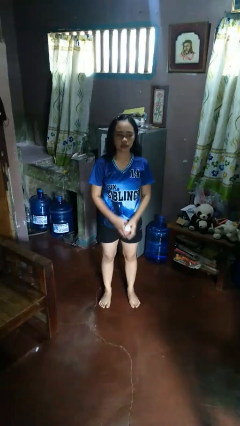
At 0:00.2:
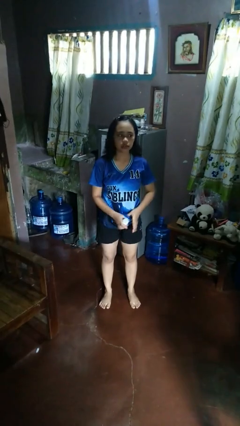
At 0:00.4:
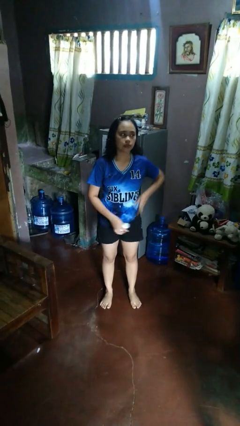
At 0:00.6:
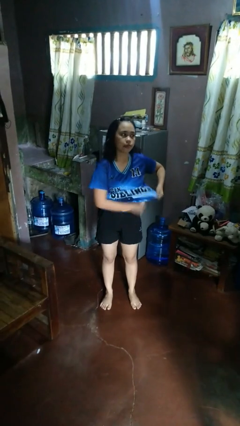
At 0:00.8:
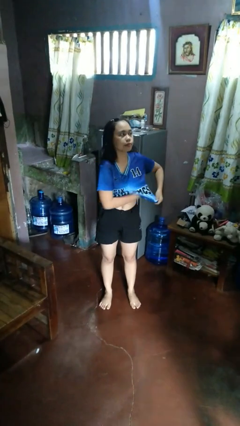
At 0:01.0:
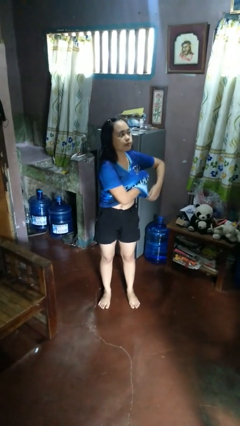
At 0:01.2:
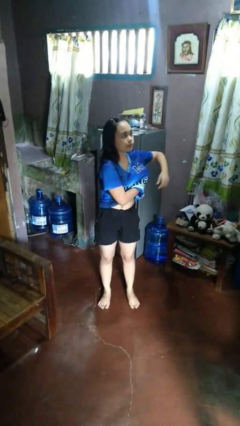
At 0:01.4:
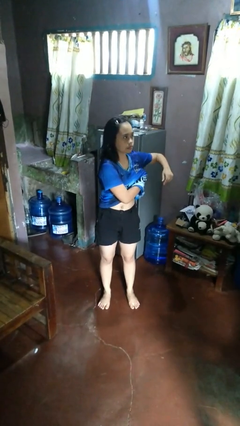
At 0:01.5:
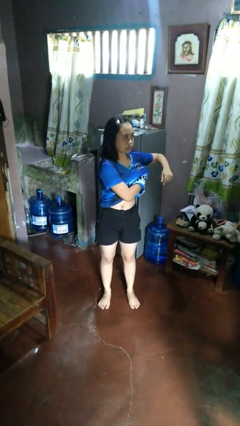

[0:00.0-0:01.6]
person applies deodorant

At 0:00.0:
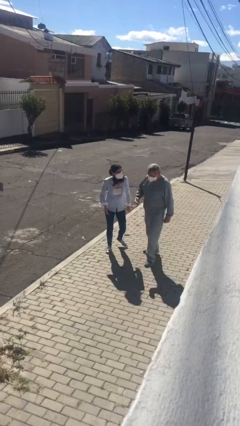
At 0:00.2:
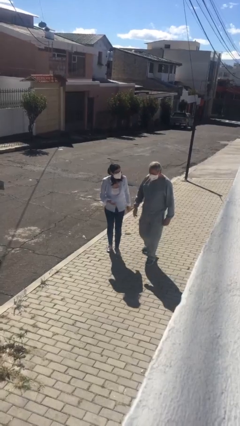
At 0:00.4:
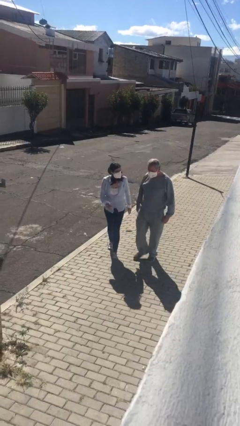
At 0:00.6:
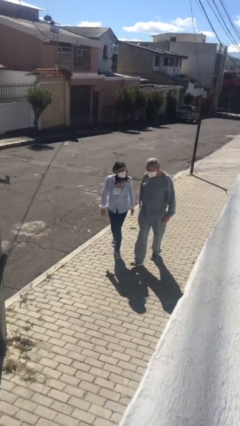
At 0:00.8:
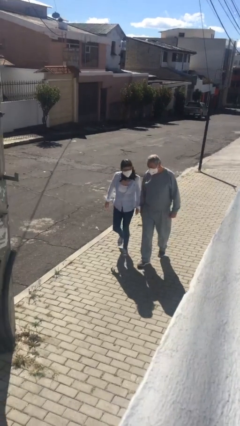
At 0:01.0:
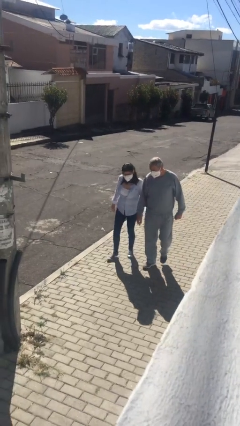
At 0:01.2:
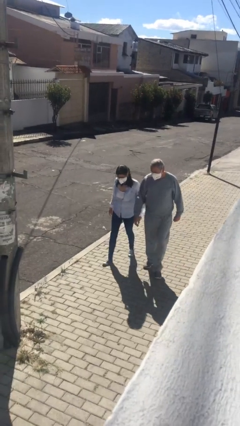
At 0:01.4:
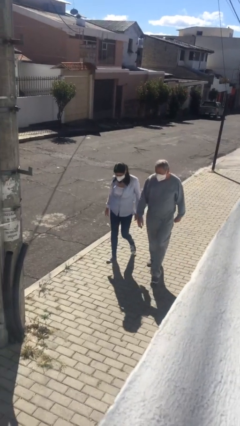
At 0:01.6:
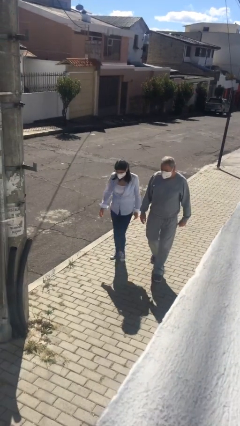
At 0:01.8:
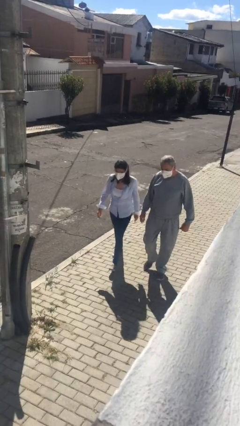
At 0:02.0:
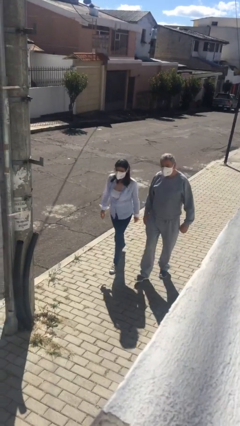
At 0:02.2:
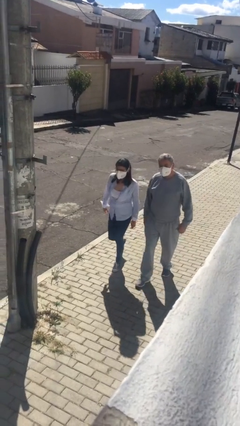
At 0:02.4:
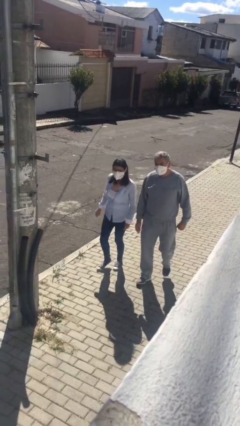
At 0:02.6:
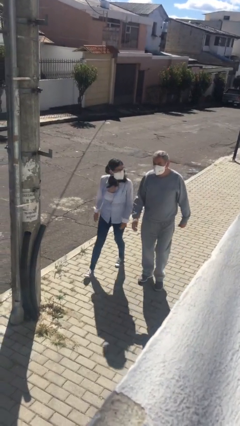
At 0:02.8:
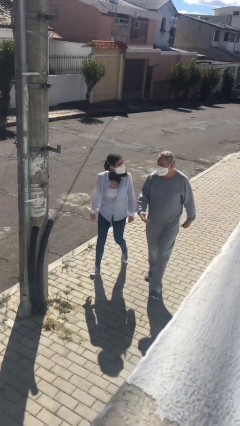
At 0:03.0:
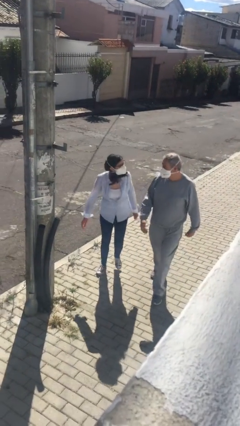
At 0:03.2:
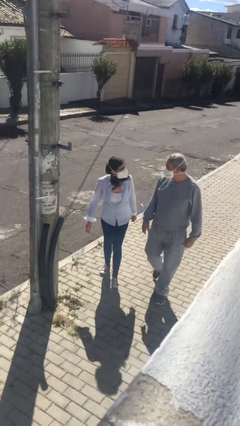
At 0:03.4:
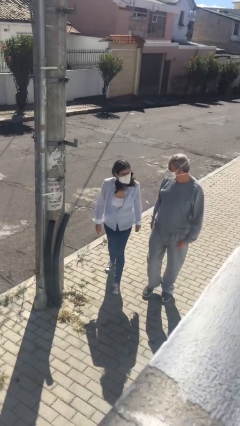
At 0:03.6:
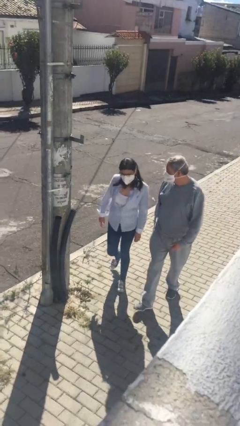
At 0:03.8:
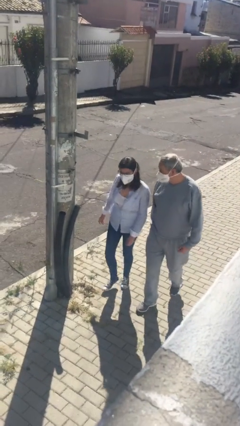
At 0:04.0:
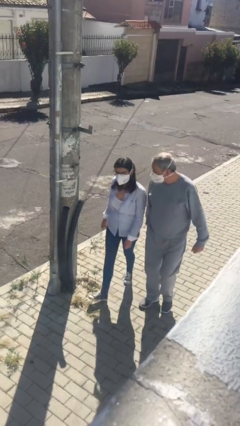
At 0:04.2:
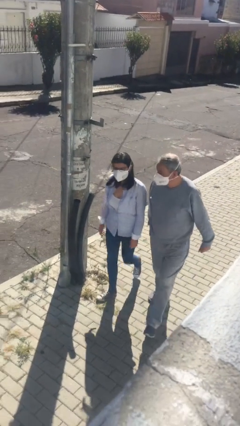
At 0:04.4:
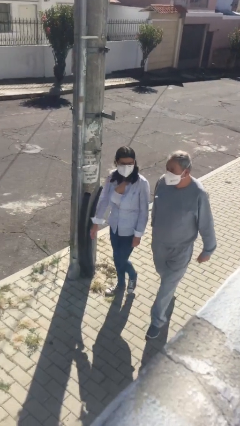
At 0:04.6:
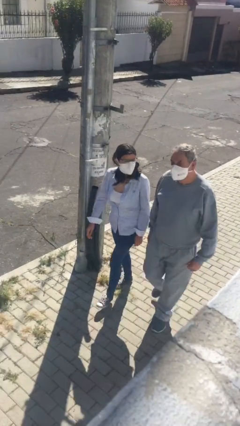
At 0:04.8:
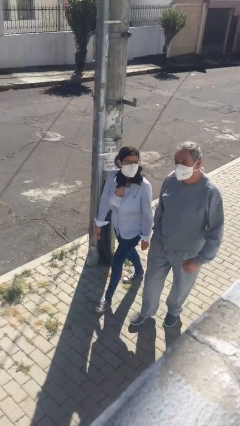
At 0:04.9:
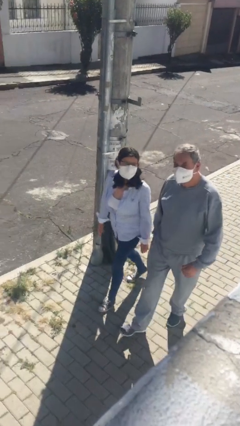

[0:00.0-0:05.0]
person talks to person

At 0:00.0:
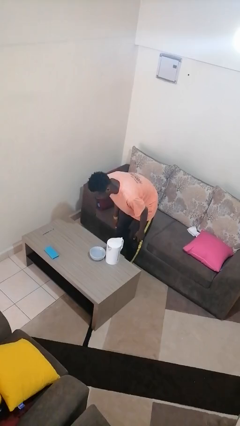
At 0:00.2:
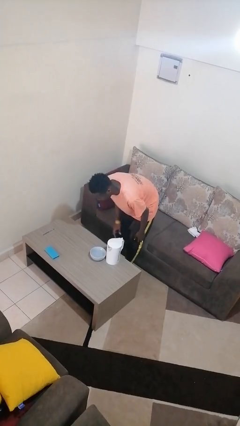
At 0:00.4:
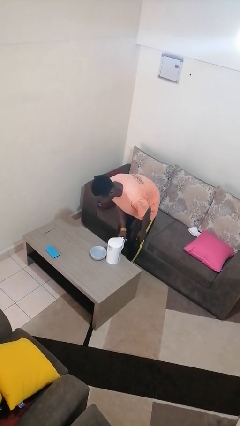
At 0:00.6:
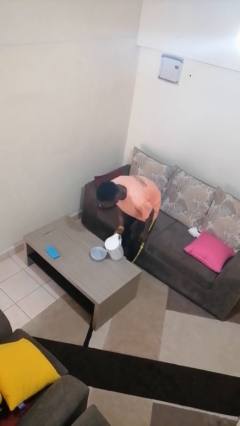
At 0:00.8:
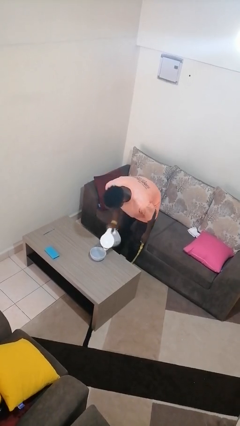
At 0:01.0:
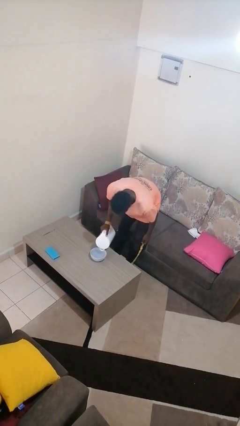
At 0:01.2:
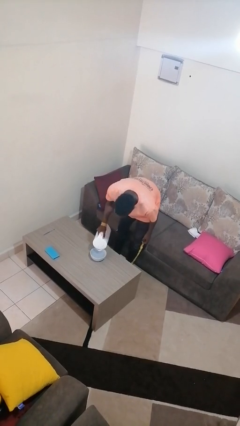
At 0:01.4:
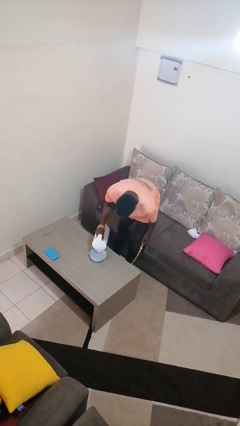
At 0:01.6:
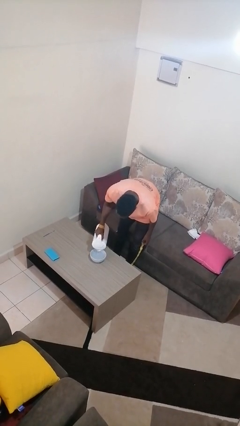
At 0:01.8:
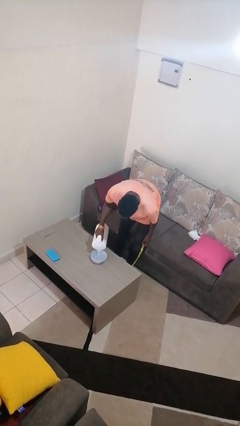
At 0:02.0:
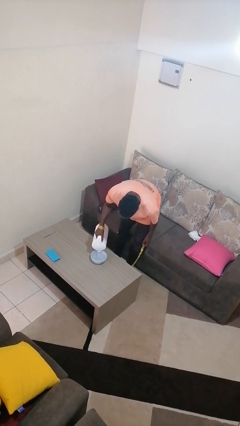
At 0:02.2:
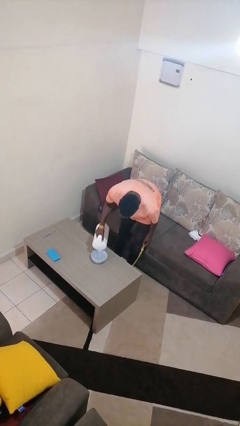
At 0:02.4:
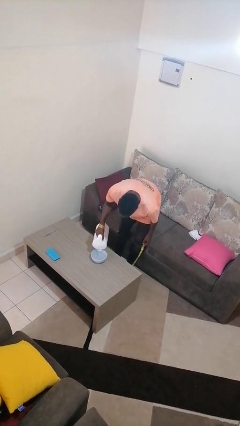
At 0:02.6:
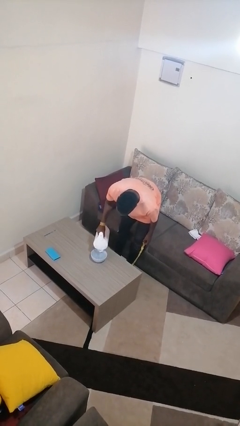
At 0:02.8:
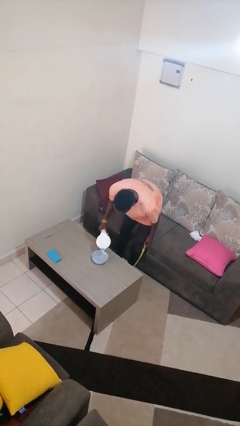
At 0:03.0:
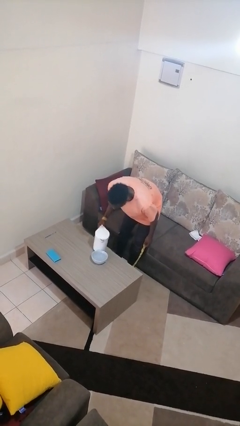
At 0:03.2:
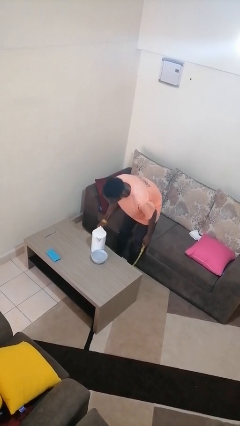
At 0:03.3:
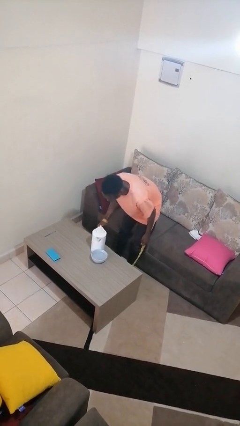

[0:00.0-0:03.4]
person pours into bowl

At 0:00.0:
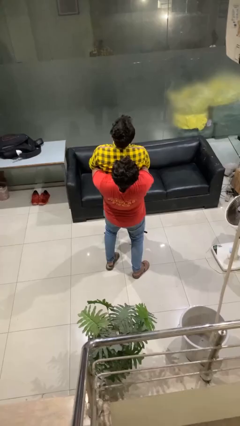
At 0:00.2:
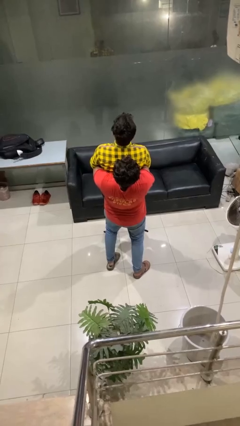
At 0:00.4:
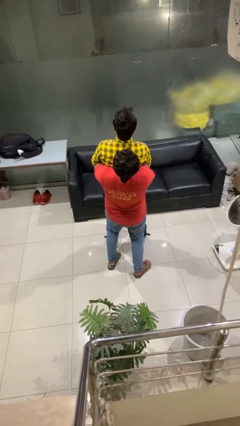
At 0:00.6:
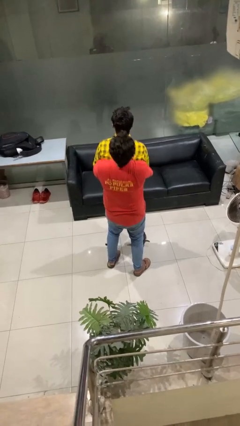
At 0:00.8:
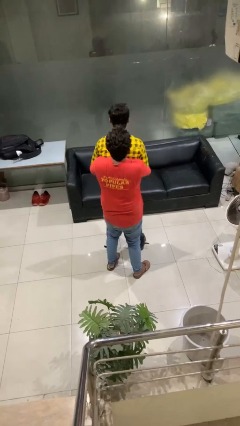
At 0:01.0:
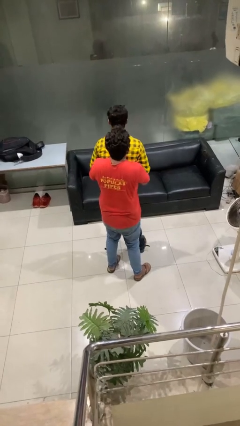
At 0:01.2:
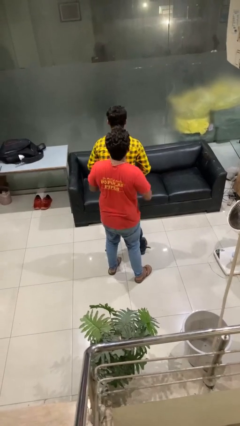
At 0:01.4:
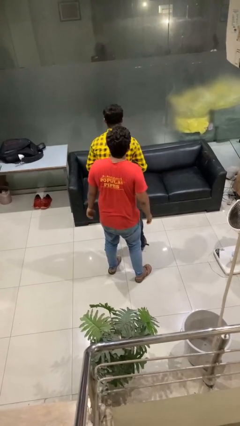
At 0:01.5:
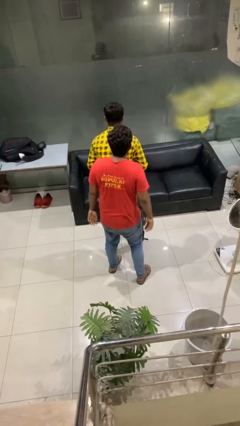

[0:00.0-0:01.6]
person puts down person

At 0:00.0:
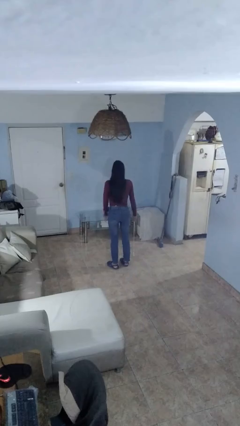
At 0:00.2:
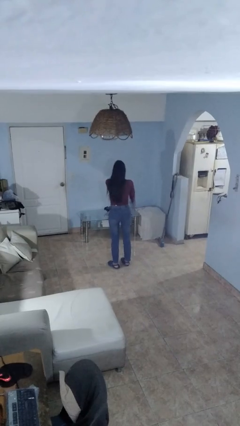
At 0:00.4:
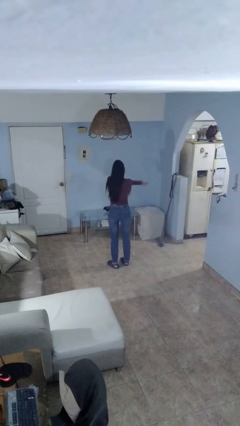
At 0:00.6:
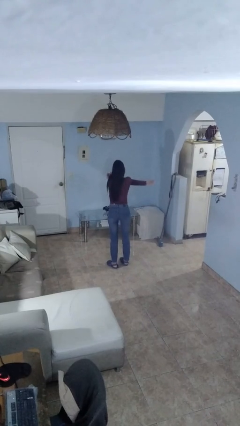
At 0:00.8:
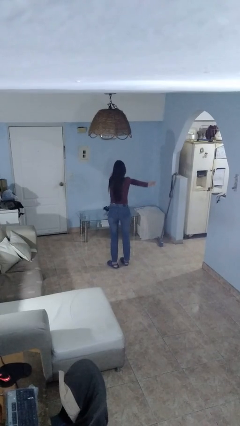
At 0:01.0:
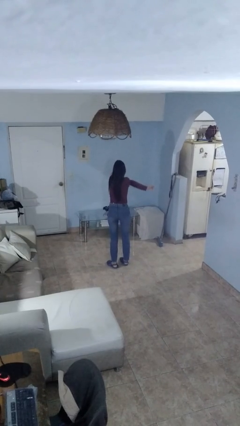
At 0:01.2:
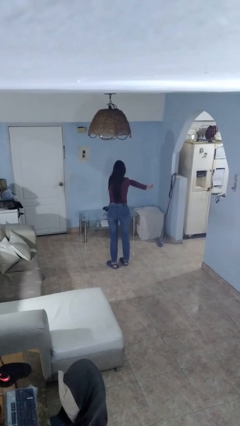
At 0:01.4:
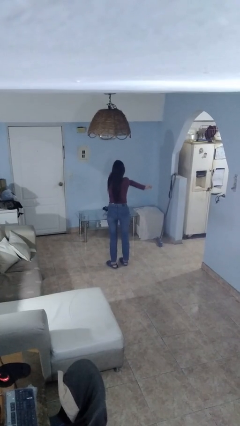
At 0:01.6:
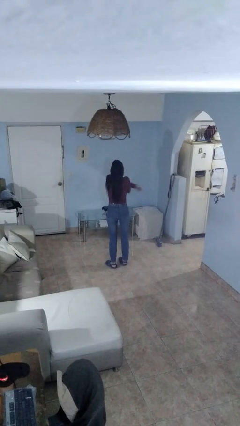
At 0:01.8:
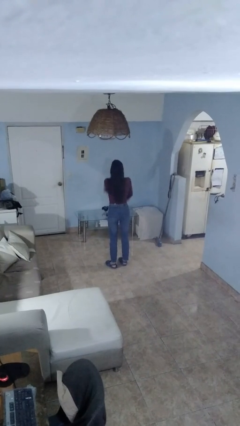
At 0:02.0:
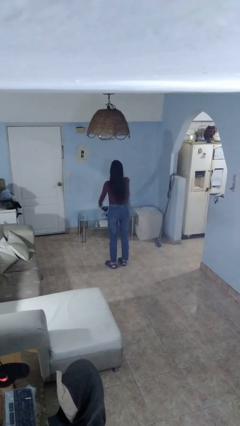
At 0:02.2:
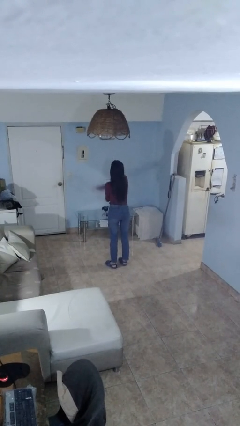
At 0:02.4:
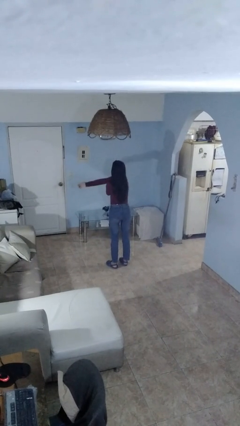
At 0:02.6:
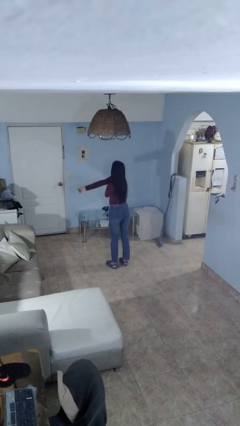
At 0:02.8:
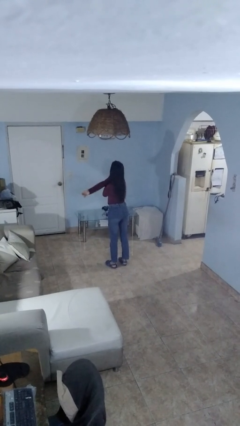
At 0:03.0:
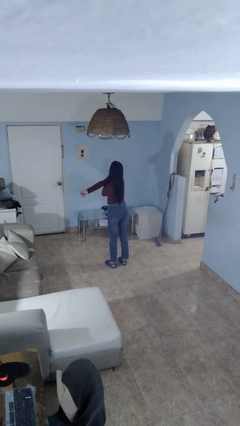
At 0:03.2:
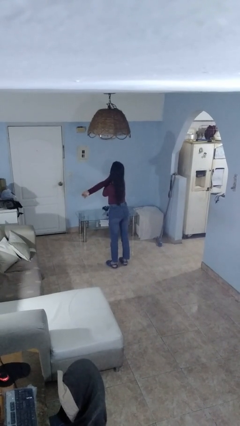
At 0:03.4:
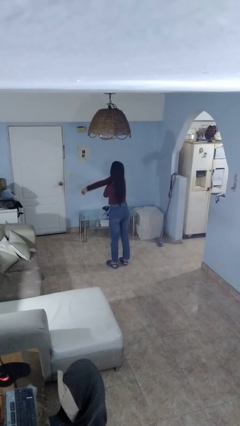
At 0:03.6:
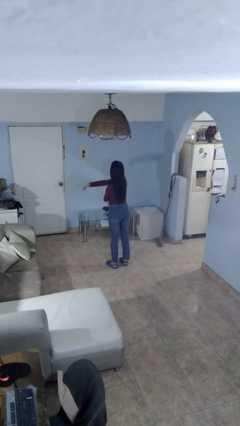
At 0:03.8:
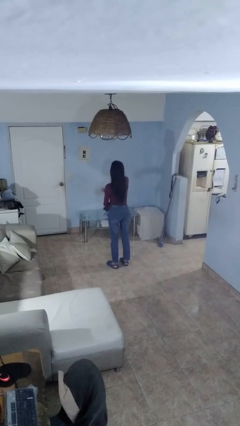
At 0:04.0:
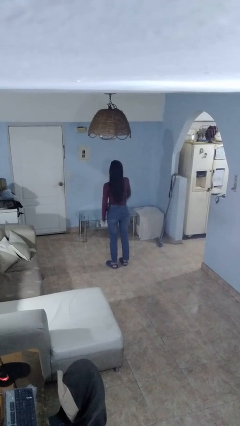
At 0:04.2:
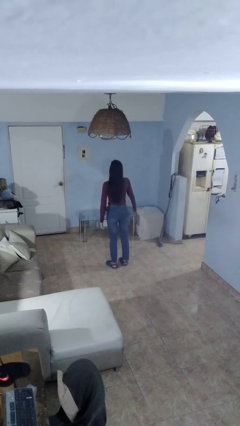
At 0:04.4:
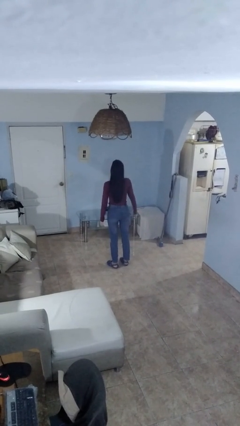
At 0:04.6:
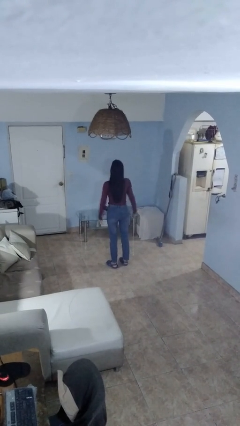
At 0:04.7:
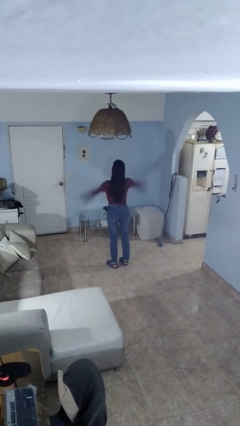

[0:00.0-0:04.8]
person stretches arms to side

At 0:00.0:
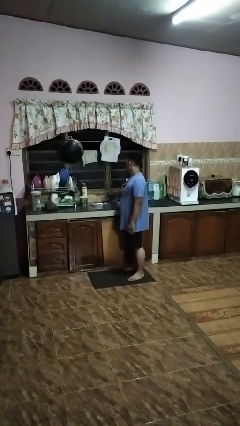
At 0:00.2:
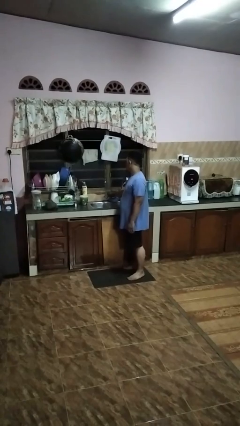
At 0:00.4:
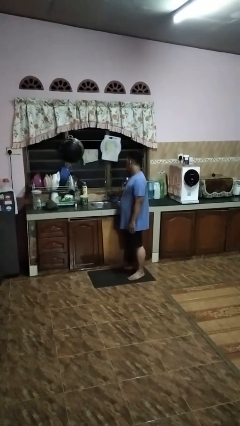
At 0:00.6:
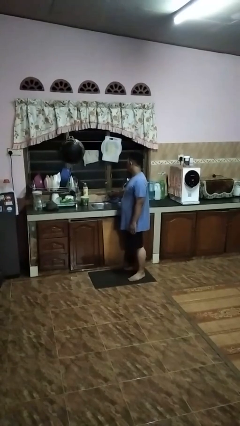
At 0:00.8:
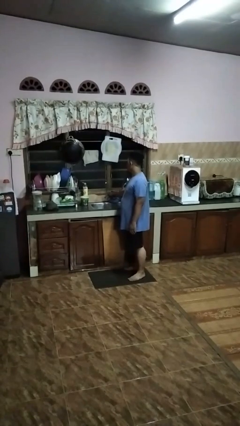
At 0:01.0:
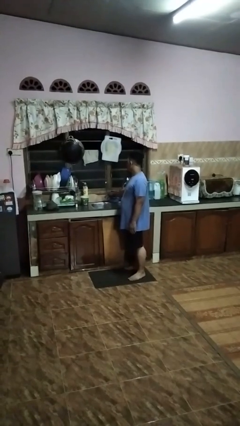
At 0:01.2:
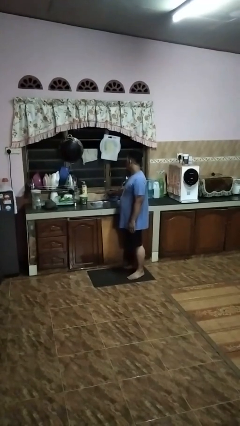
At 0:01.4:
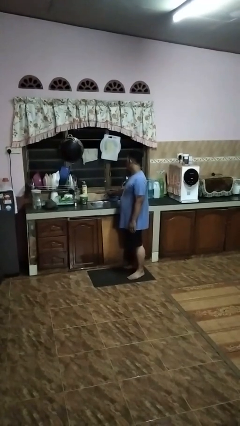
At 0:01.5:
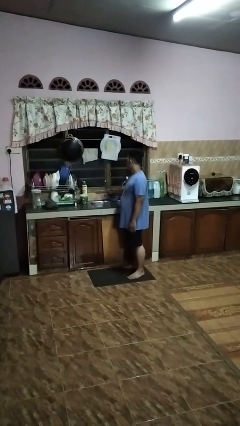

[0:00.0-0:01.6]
person turns off faucet
